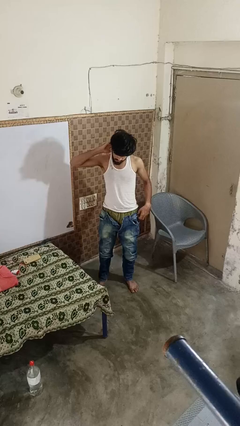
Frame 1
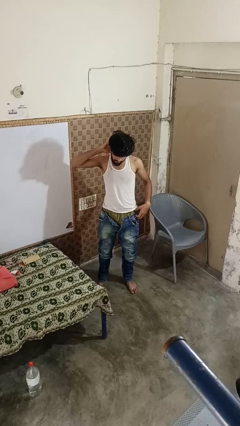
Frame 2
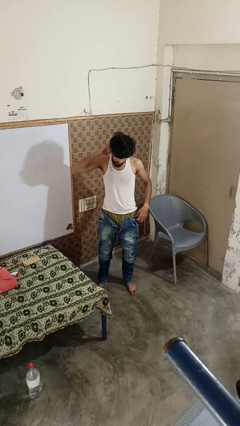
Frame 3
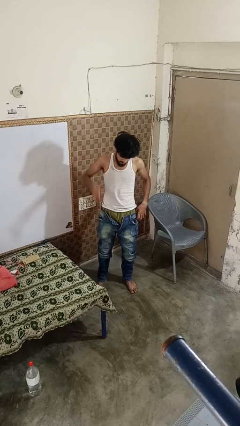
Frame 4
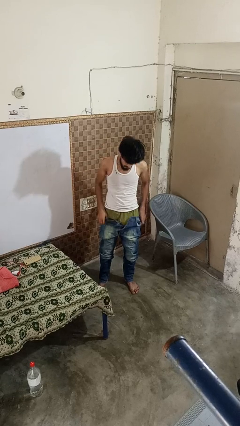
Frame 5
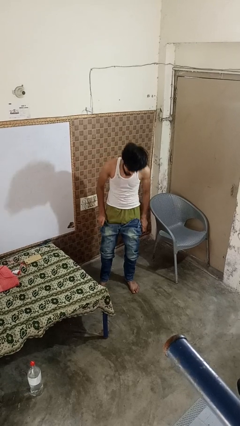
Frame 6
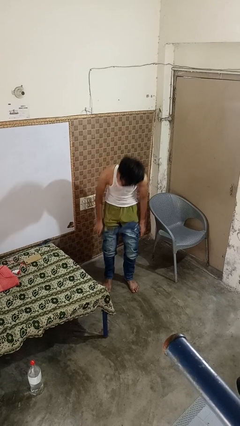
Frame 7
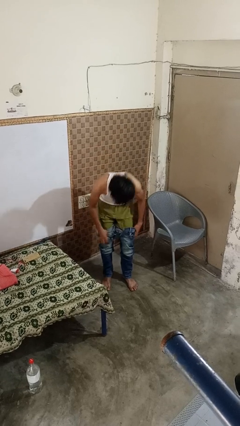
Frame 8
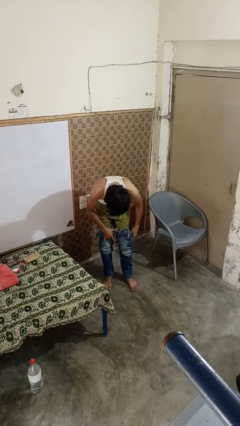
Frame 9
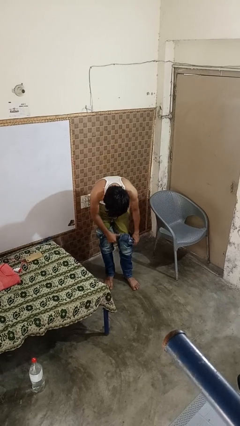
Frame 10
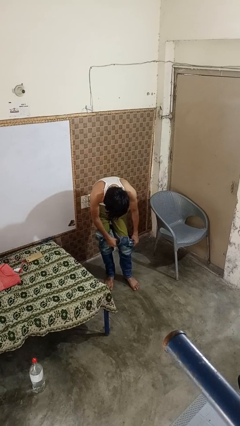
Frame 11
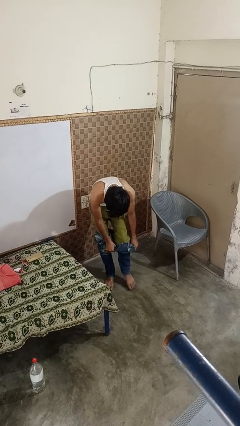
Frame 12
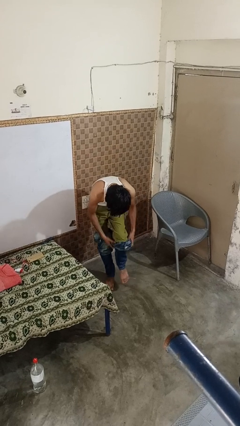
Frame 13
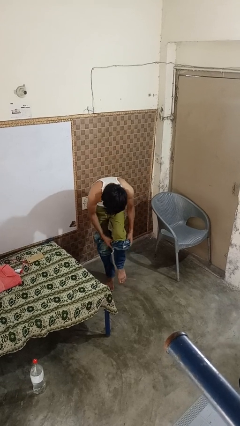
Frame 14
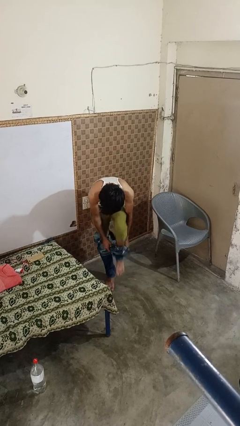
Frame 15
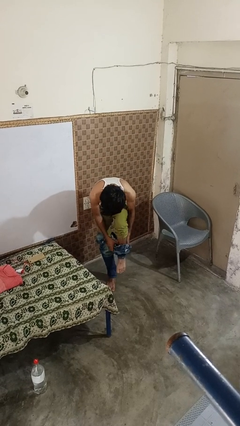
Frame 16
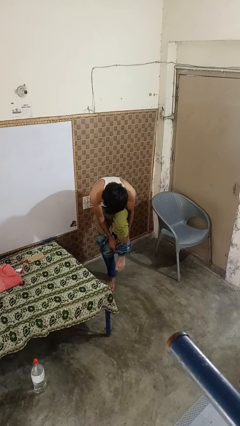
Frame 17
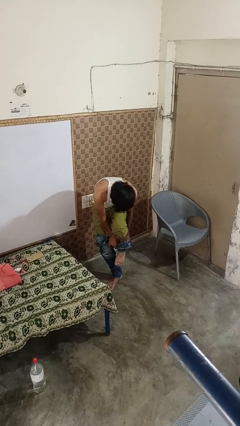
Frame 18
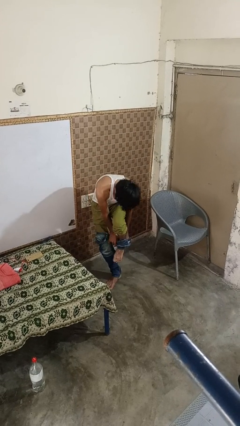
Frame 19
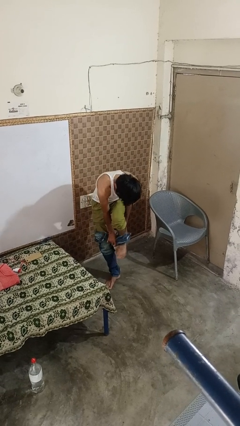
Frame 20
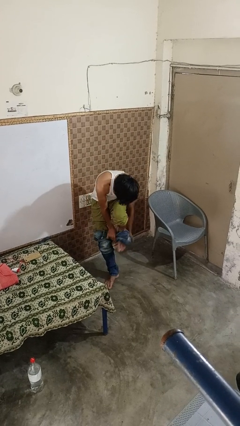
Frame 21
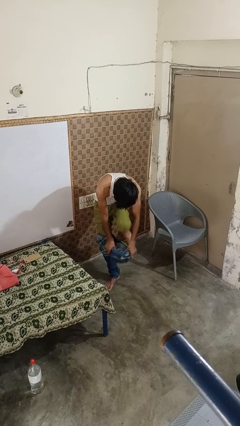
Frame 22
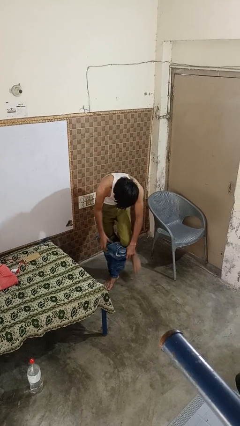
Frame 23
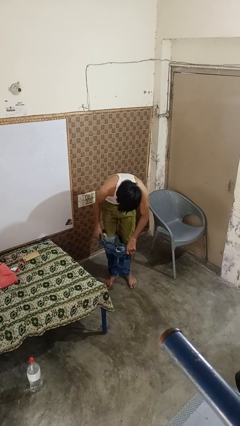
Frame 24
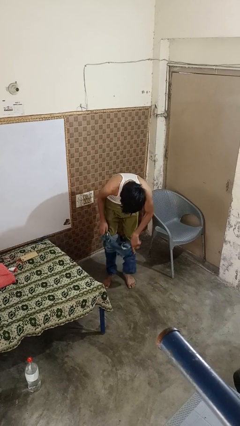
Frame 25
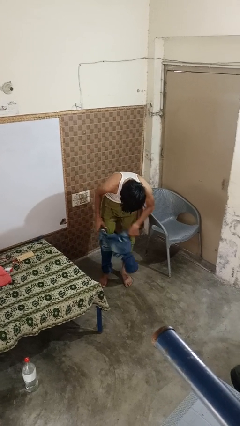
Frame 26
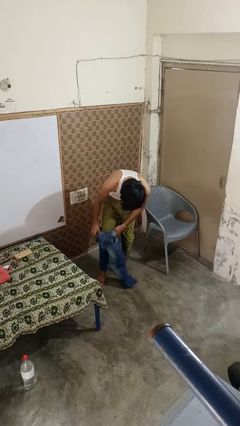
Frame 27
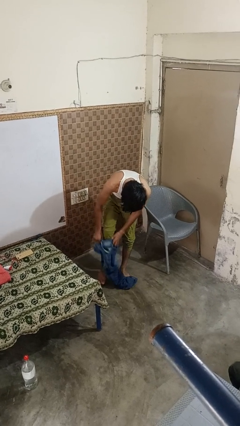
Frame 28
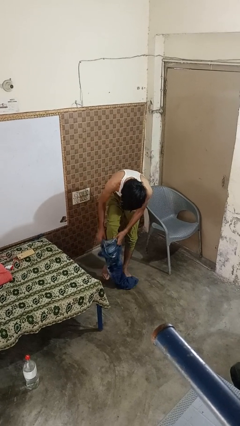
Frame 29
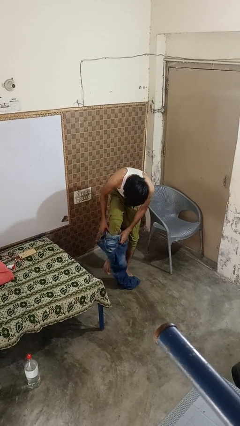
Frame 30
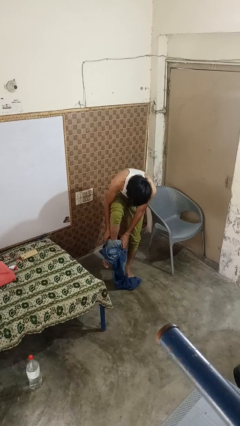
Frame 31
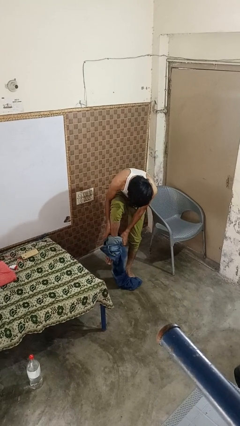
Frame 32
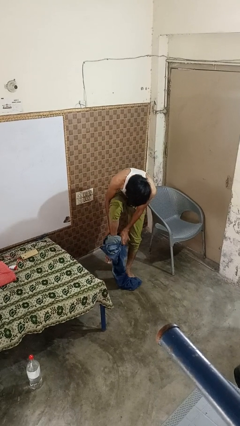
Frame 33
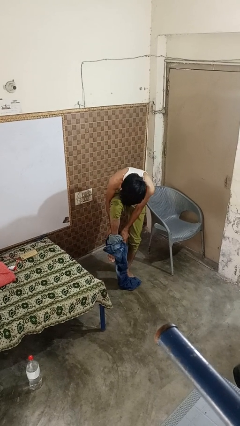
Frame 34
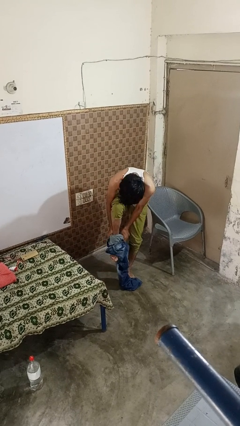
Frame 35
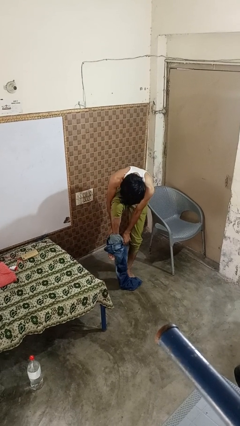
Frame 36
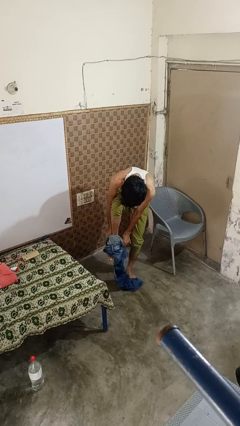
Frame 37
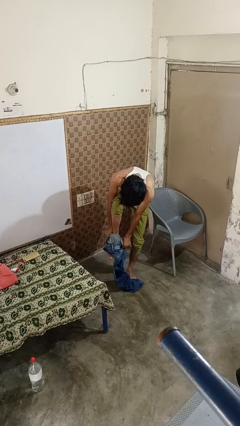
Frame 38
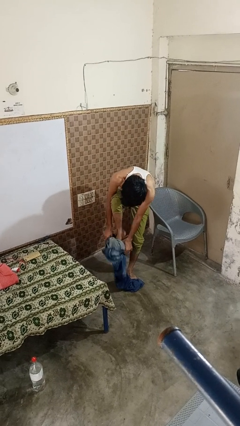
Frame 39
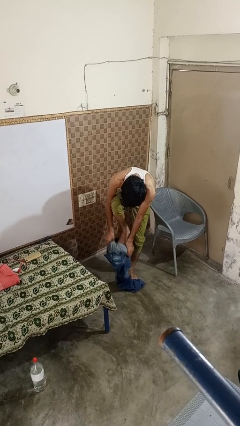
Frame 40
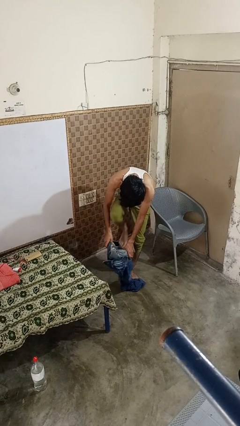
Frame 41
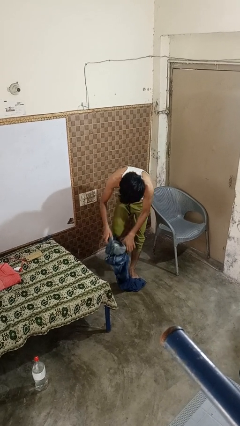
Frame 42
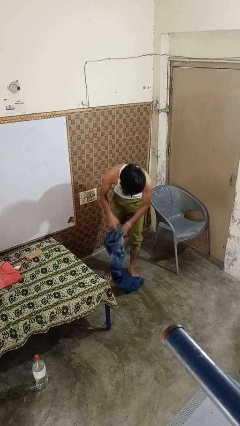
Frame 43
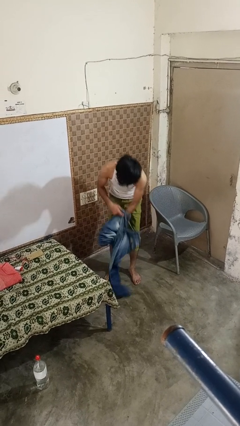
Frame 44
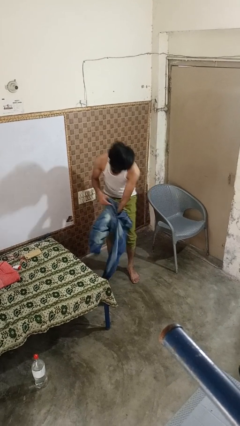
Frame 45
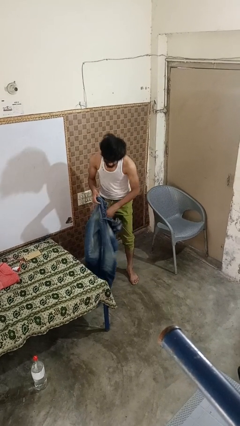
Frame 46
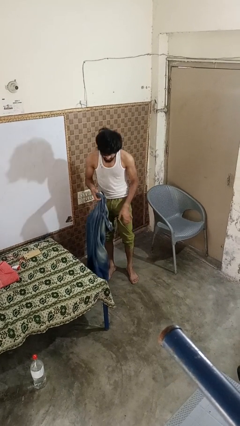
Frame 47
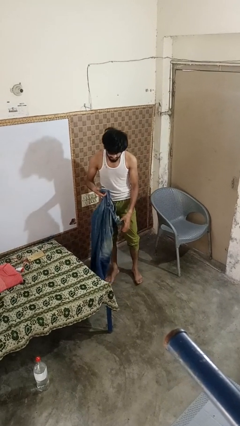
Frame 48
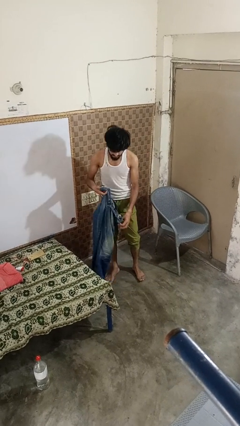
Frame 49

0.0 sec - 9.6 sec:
person takes off pants

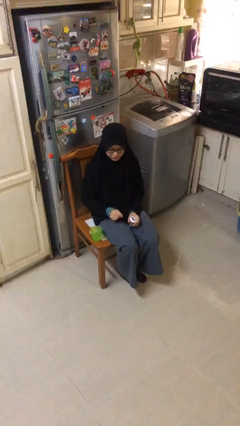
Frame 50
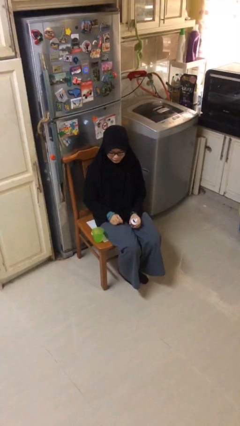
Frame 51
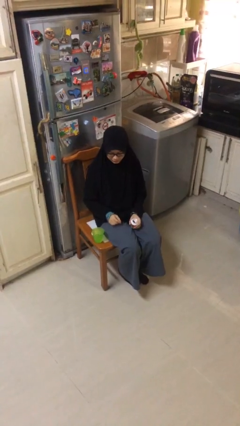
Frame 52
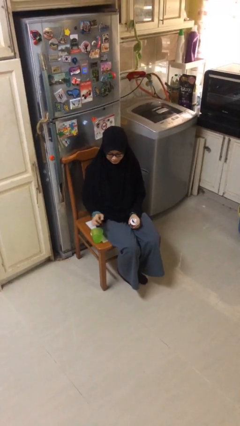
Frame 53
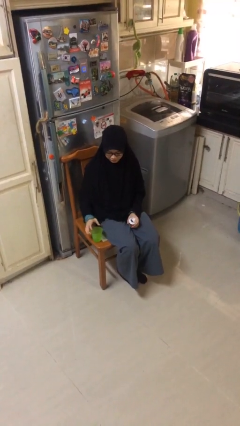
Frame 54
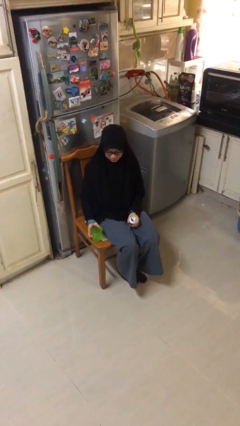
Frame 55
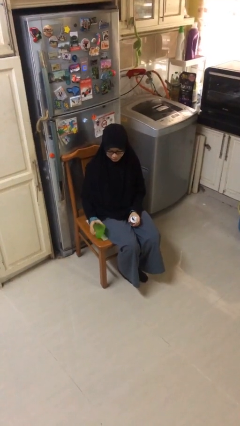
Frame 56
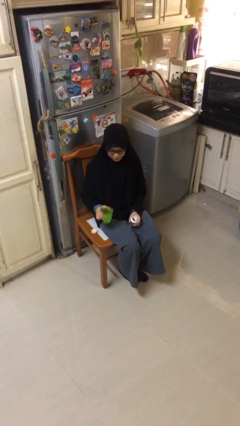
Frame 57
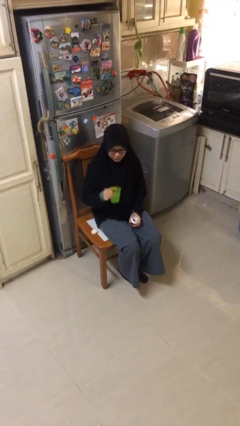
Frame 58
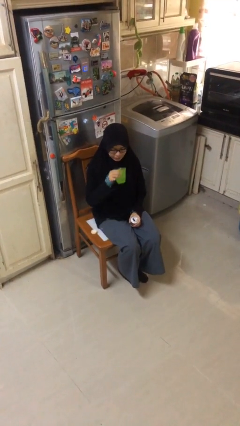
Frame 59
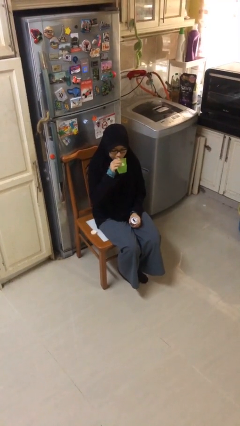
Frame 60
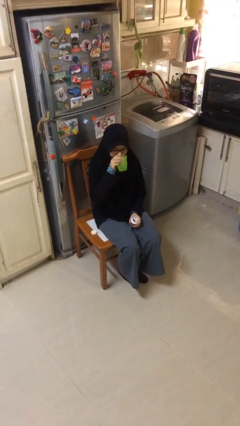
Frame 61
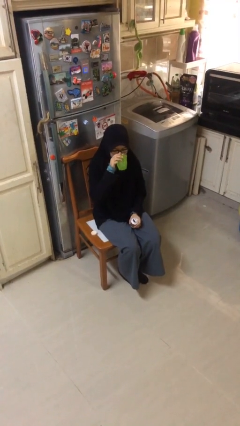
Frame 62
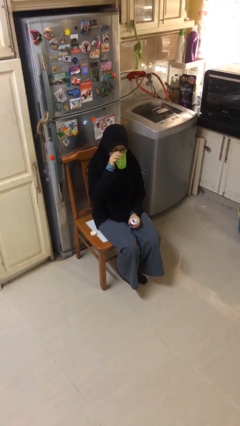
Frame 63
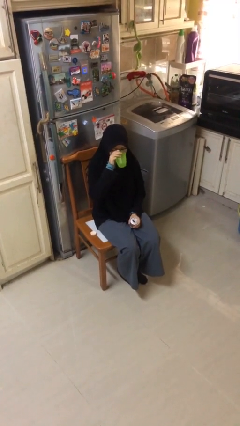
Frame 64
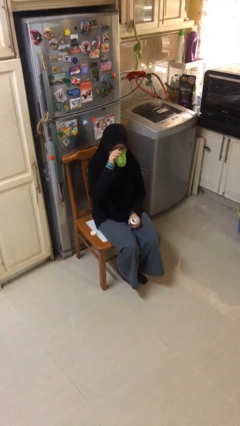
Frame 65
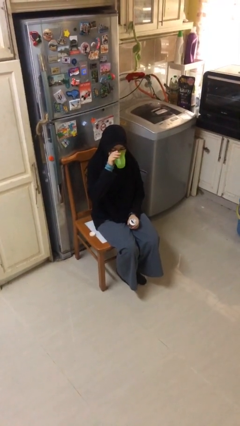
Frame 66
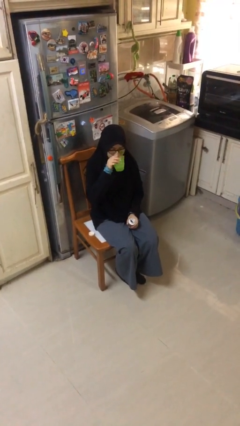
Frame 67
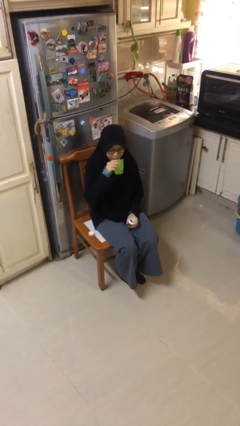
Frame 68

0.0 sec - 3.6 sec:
person drinks from cup

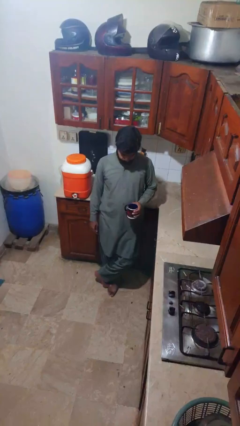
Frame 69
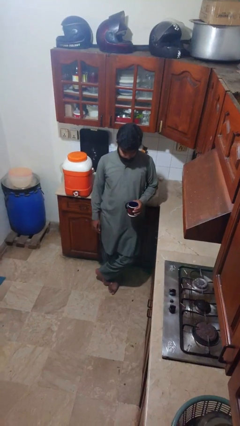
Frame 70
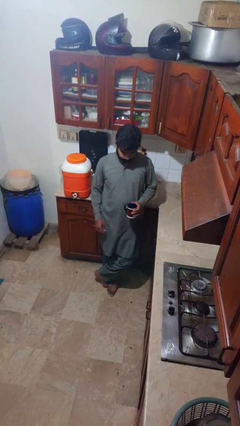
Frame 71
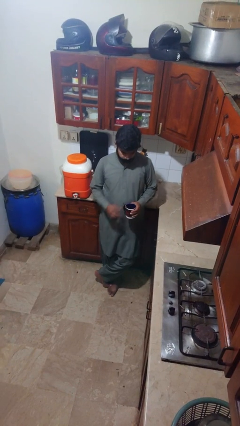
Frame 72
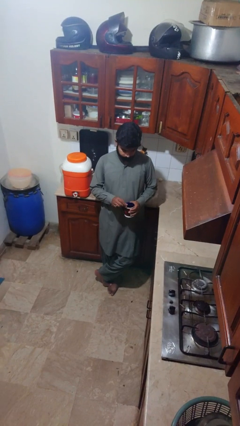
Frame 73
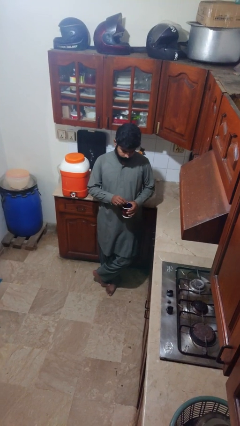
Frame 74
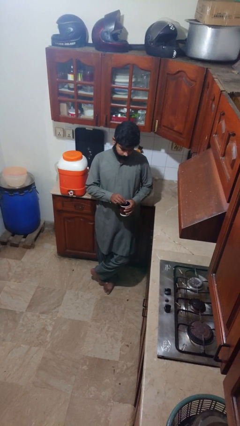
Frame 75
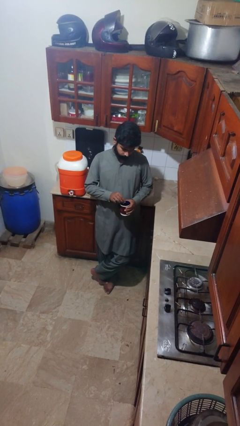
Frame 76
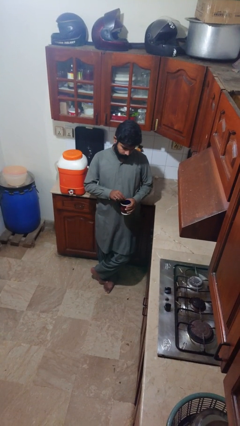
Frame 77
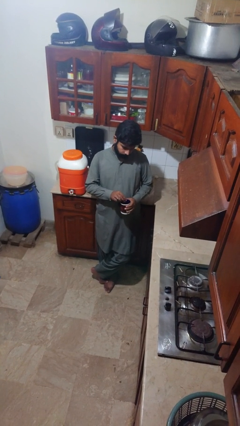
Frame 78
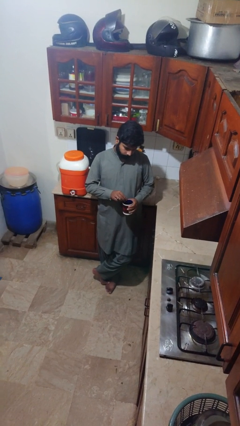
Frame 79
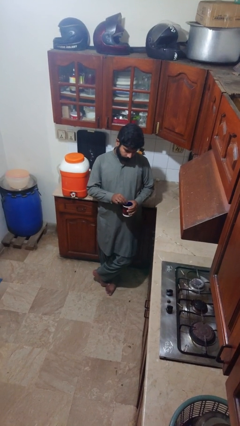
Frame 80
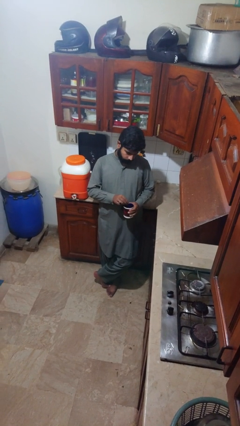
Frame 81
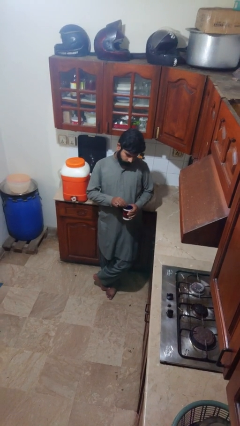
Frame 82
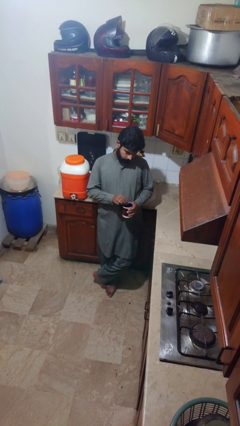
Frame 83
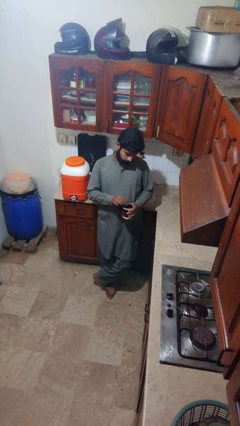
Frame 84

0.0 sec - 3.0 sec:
person stirs mug

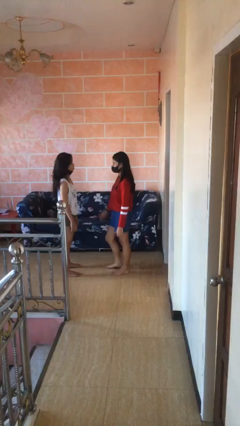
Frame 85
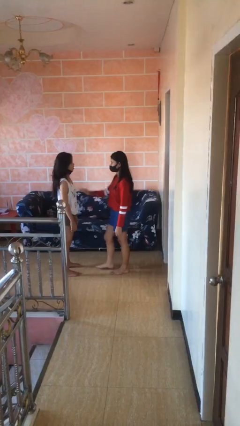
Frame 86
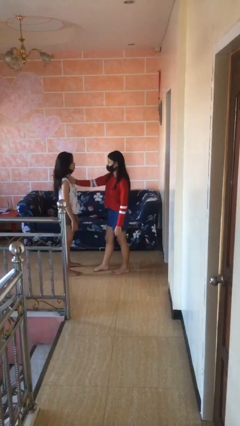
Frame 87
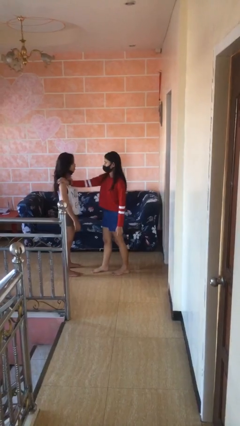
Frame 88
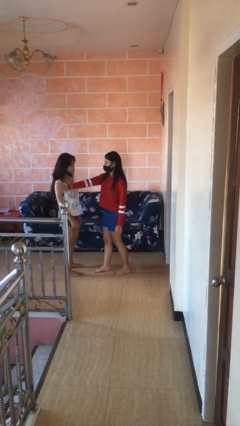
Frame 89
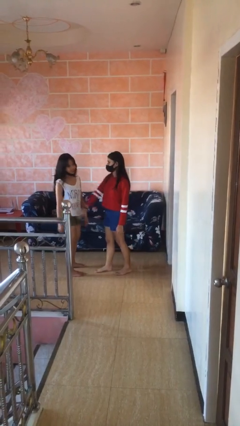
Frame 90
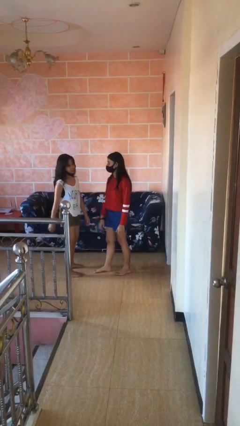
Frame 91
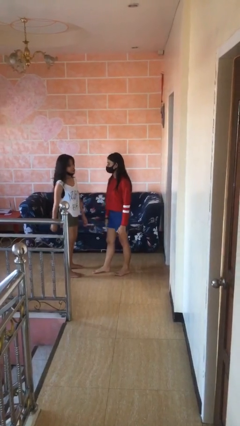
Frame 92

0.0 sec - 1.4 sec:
person shoves person

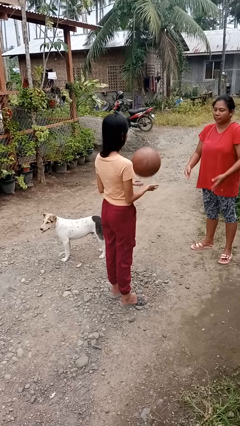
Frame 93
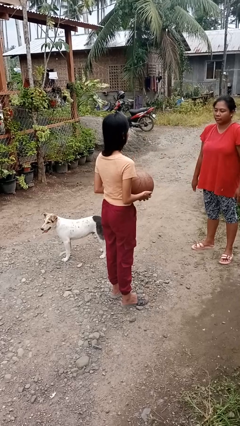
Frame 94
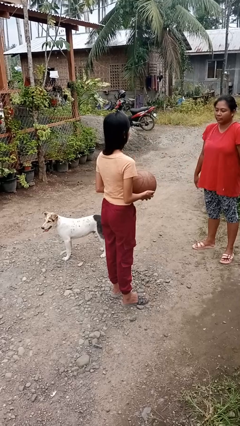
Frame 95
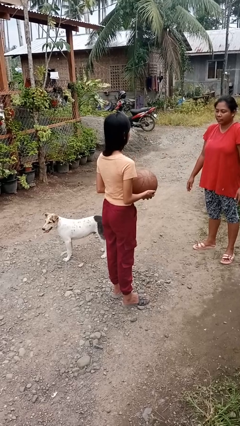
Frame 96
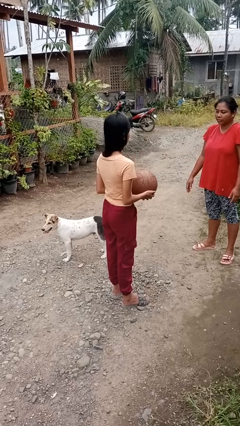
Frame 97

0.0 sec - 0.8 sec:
person catches object from person
